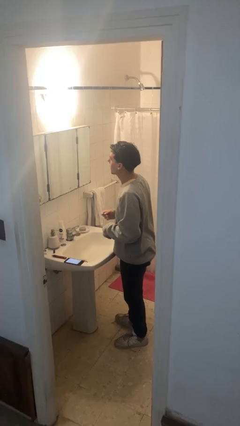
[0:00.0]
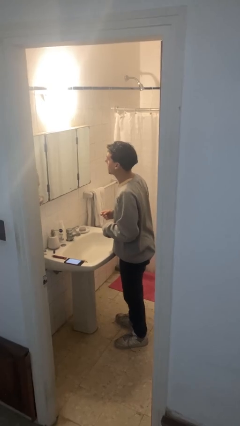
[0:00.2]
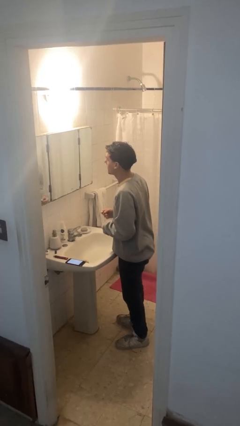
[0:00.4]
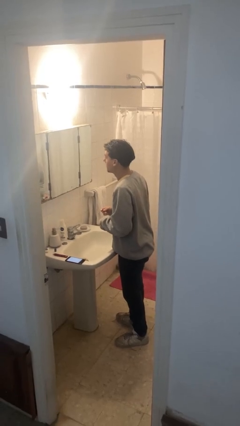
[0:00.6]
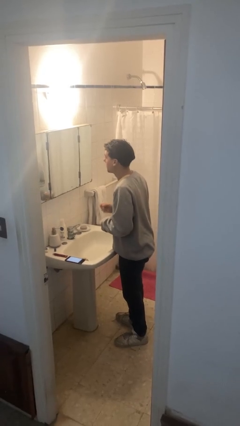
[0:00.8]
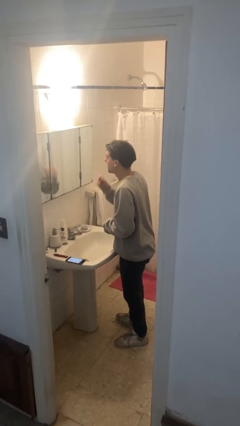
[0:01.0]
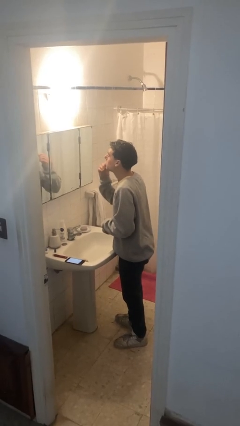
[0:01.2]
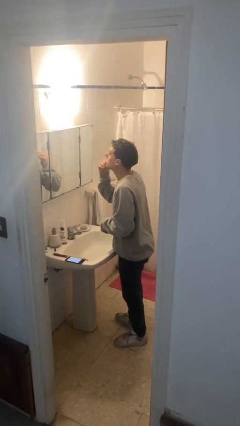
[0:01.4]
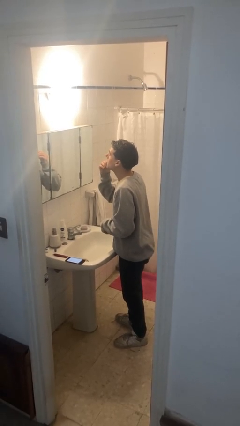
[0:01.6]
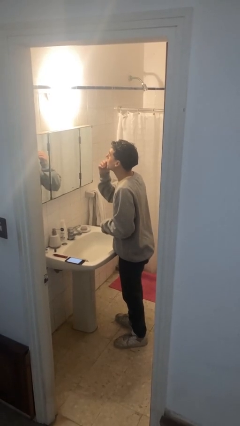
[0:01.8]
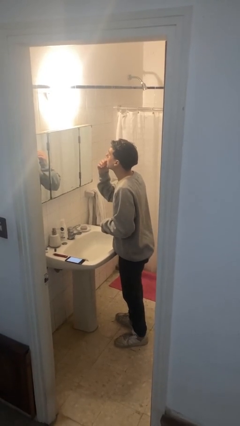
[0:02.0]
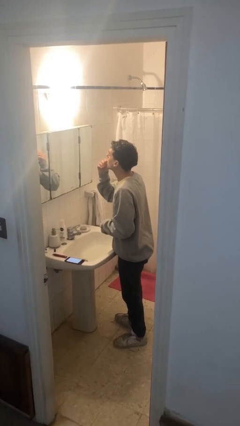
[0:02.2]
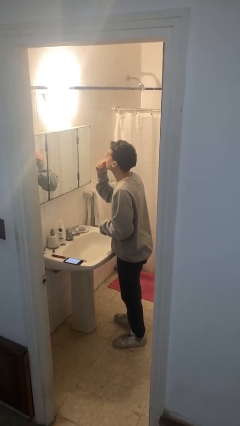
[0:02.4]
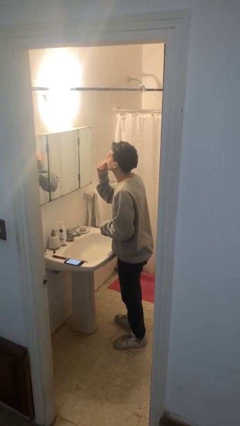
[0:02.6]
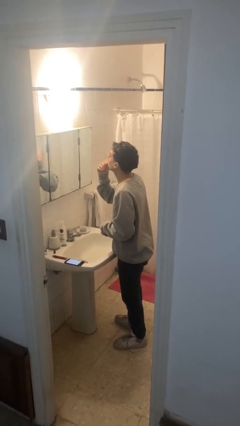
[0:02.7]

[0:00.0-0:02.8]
person applies lip makeup

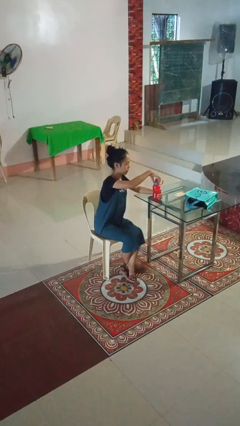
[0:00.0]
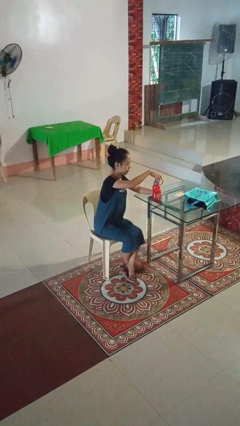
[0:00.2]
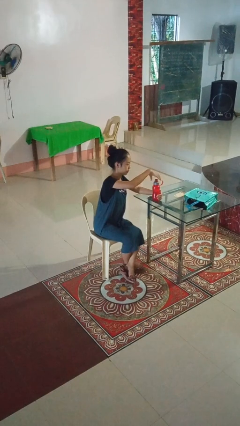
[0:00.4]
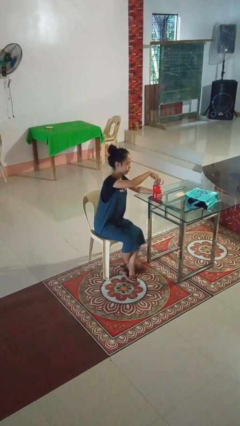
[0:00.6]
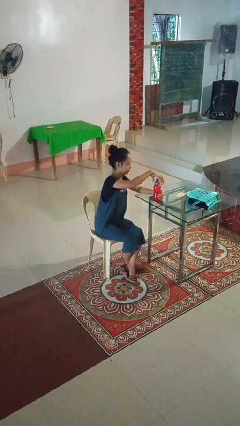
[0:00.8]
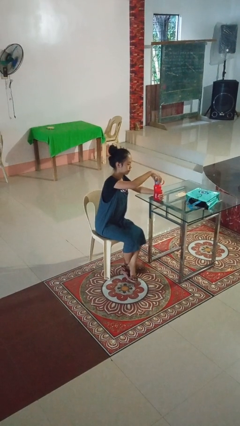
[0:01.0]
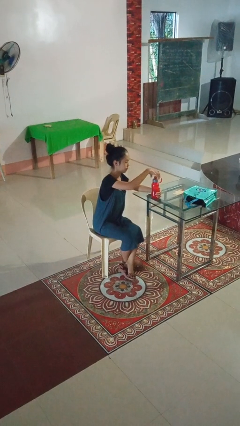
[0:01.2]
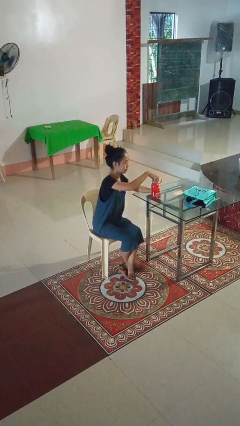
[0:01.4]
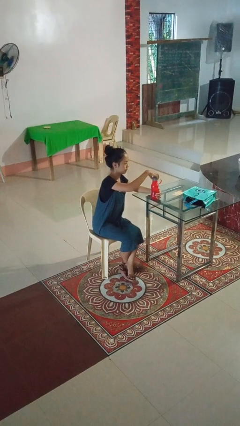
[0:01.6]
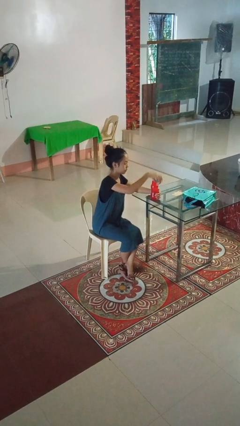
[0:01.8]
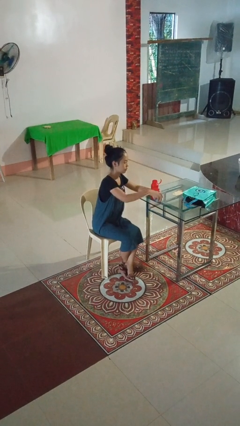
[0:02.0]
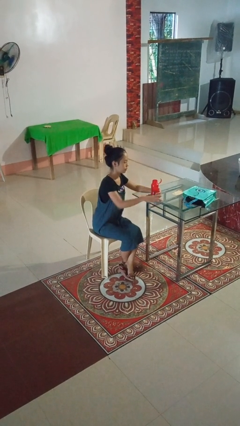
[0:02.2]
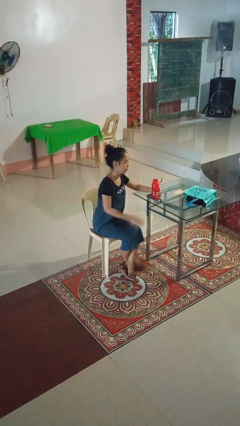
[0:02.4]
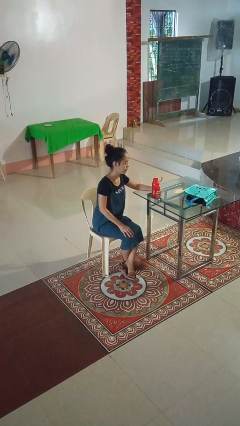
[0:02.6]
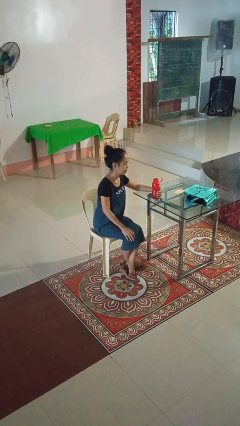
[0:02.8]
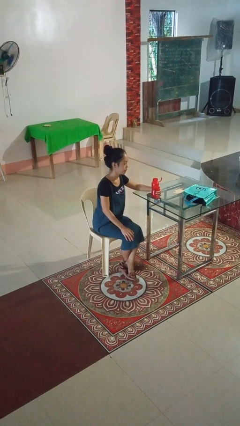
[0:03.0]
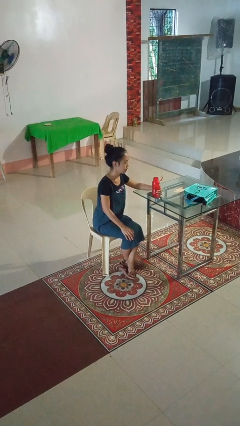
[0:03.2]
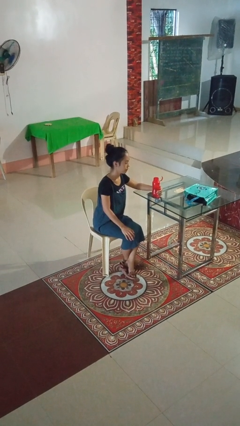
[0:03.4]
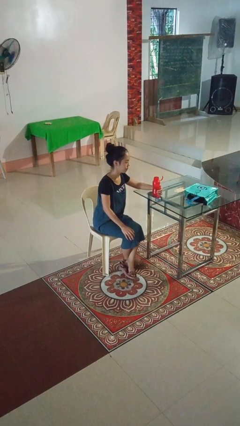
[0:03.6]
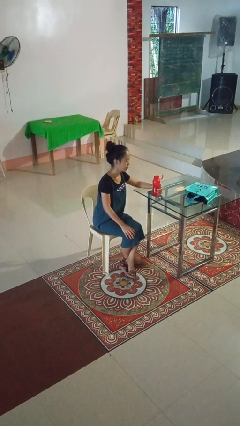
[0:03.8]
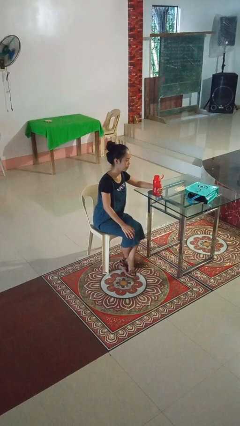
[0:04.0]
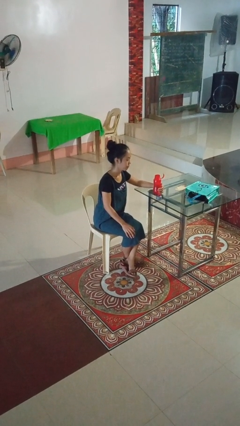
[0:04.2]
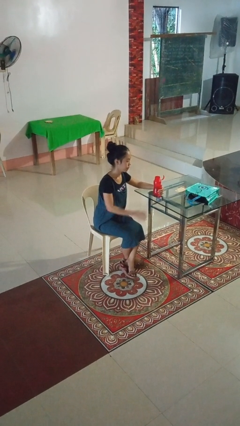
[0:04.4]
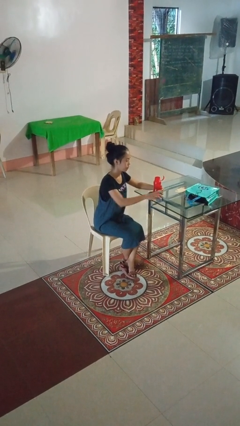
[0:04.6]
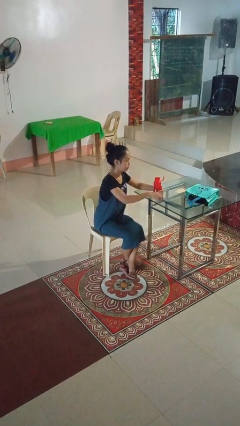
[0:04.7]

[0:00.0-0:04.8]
person unscrews lid from bottle

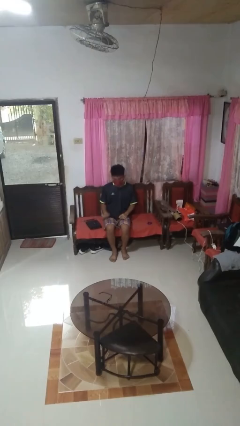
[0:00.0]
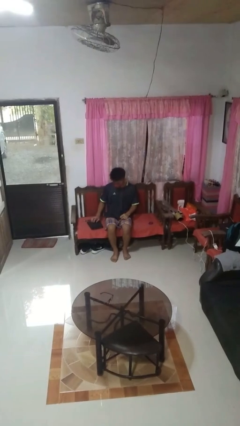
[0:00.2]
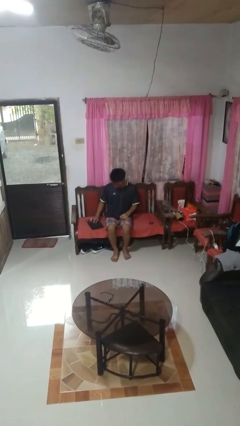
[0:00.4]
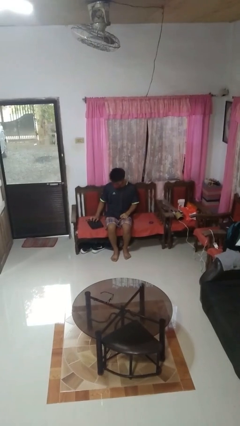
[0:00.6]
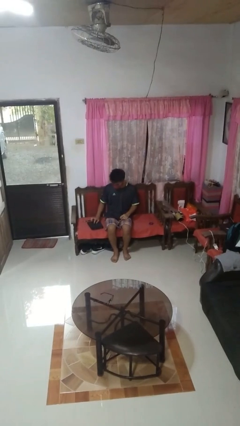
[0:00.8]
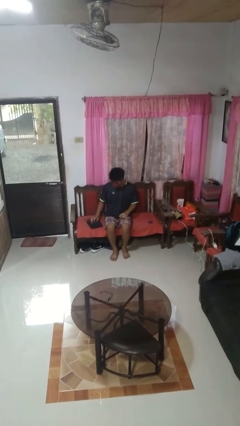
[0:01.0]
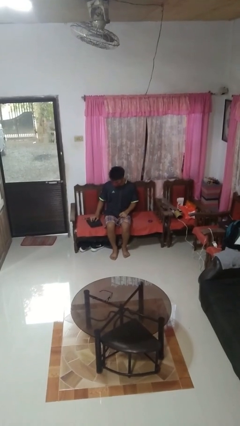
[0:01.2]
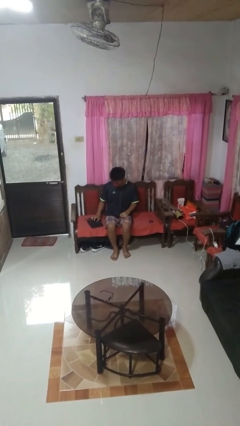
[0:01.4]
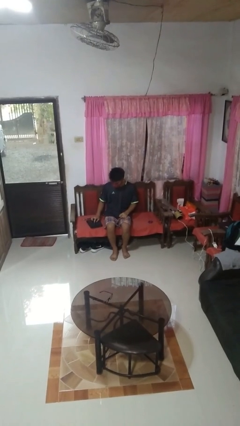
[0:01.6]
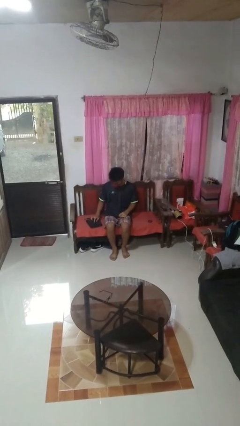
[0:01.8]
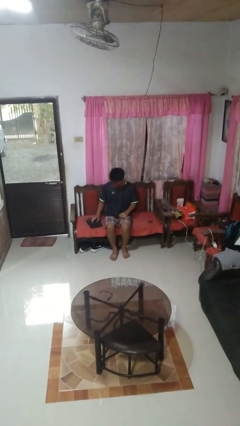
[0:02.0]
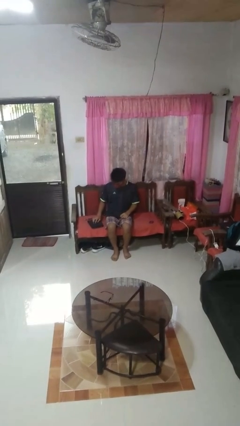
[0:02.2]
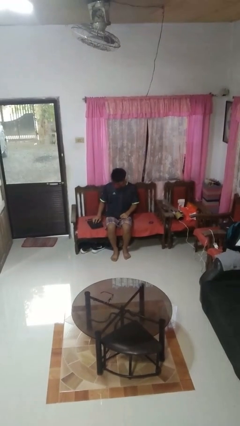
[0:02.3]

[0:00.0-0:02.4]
person taps object with finger

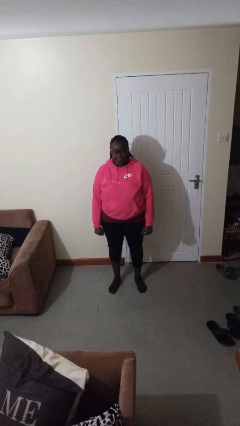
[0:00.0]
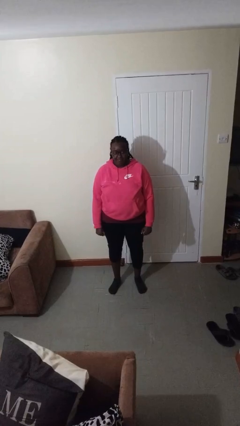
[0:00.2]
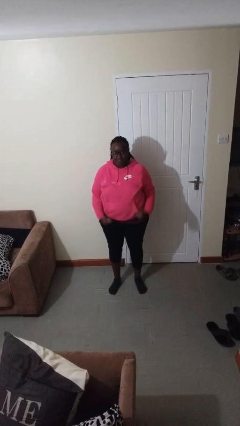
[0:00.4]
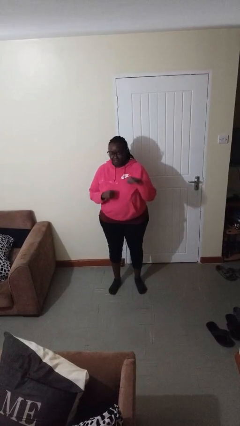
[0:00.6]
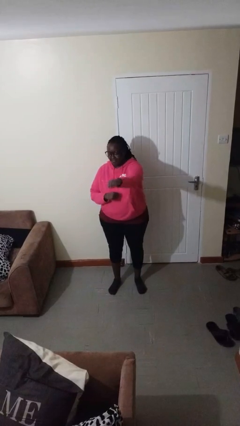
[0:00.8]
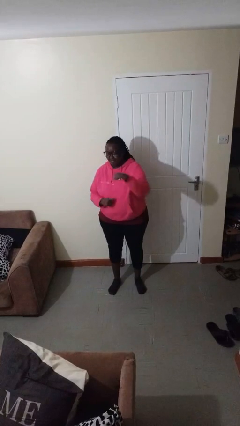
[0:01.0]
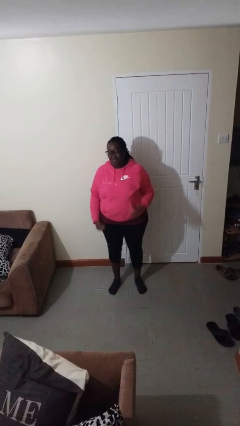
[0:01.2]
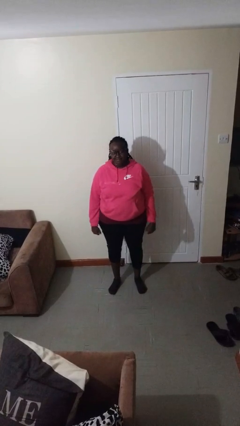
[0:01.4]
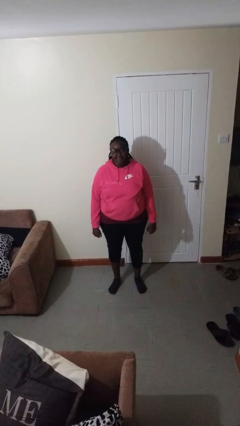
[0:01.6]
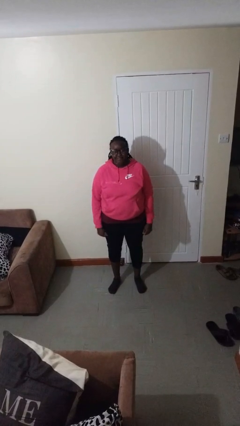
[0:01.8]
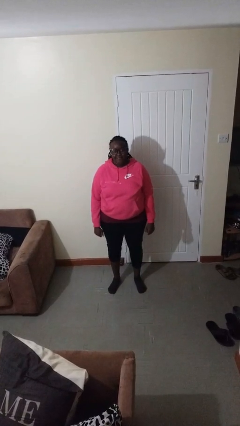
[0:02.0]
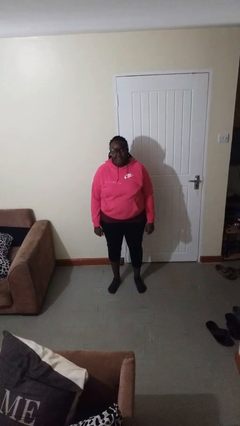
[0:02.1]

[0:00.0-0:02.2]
person punches

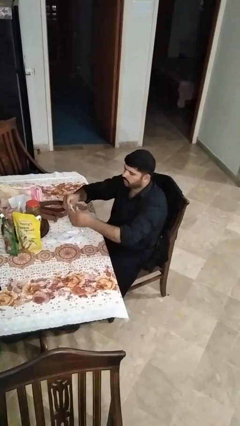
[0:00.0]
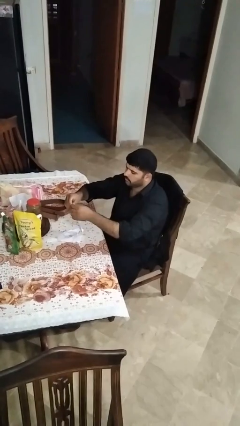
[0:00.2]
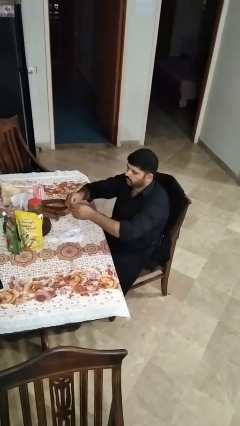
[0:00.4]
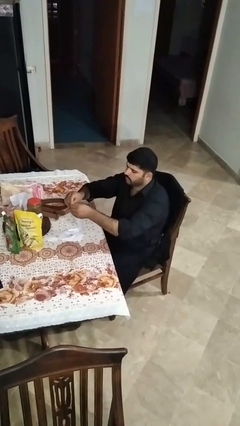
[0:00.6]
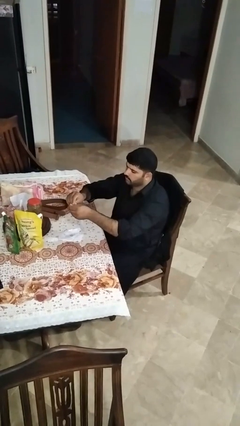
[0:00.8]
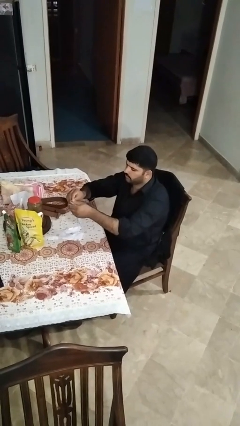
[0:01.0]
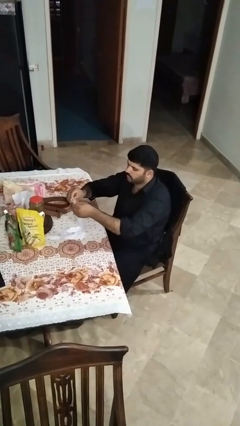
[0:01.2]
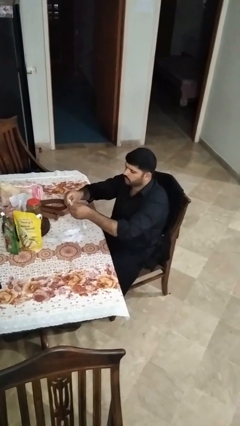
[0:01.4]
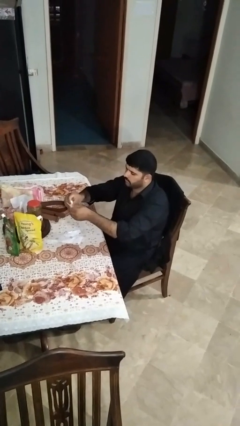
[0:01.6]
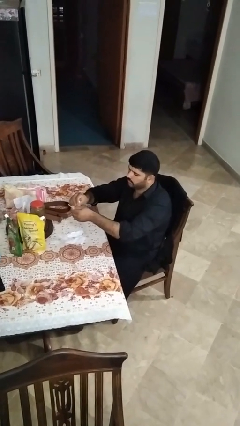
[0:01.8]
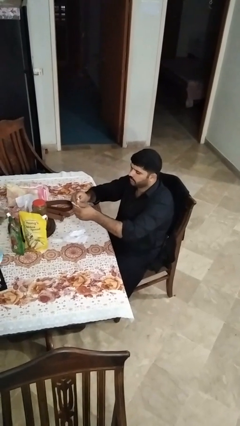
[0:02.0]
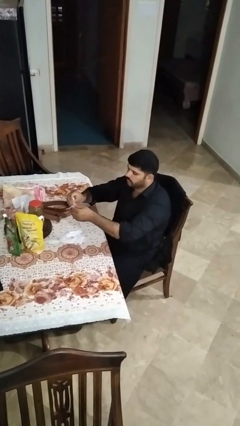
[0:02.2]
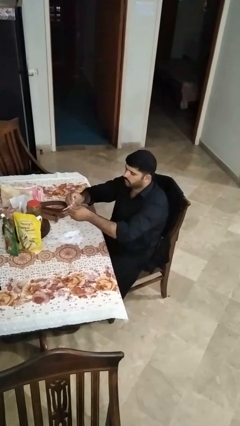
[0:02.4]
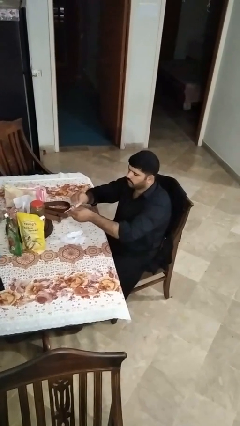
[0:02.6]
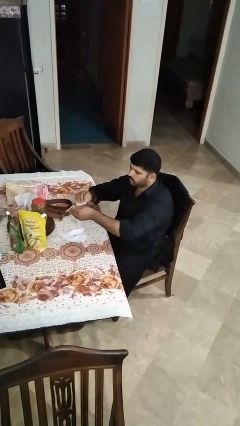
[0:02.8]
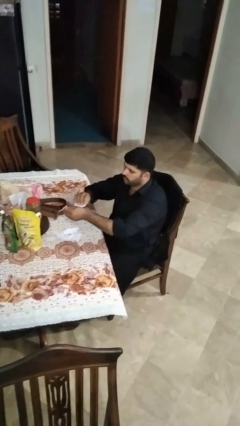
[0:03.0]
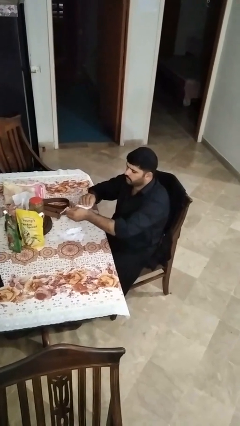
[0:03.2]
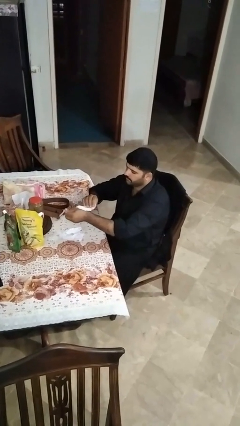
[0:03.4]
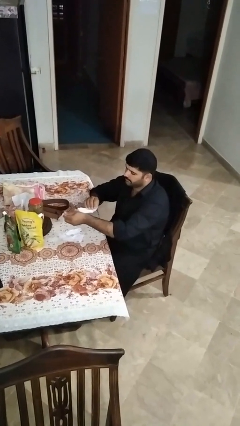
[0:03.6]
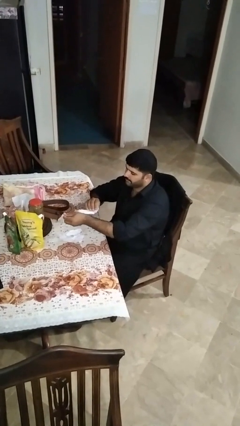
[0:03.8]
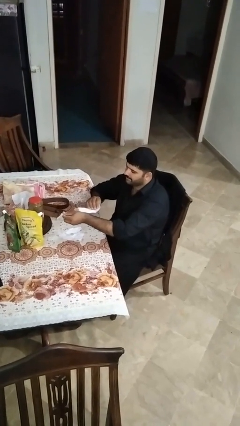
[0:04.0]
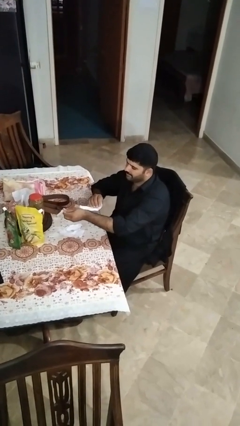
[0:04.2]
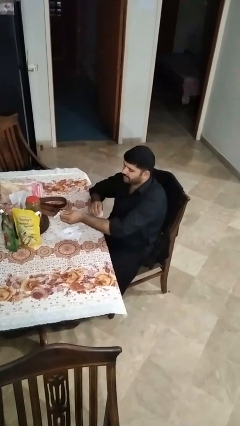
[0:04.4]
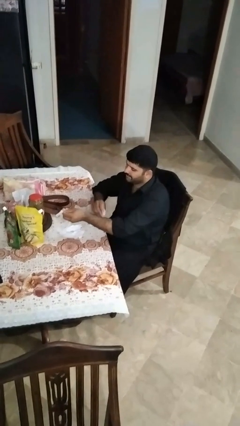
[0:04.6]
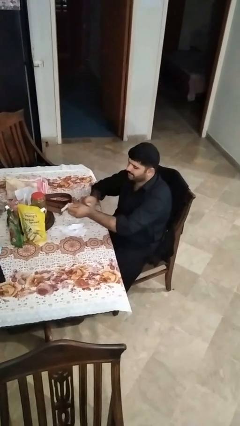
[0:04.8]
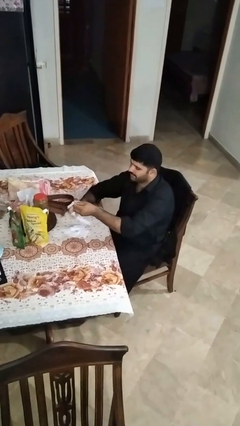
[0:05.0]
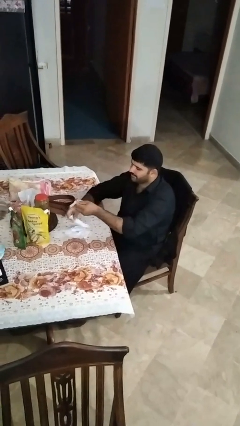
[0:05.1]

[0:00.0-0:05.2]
person tears paper
